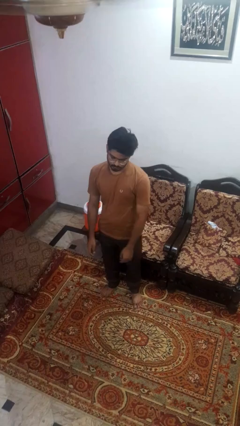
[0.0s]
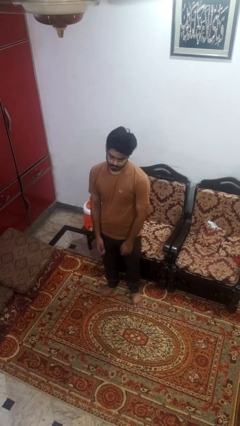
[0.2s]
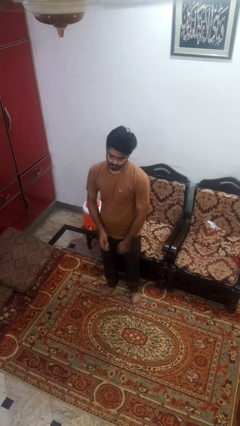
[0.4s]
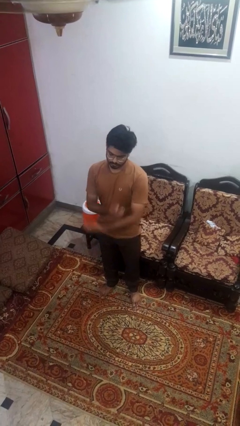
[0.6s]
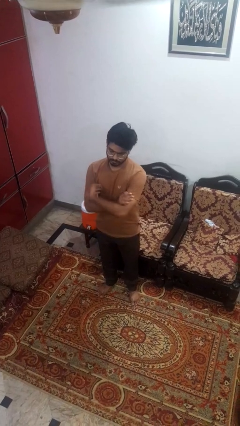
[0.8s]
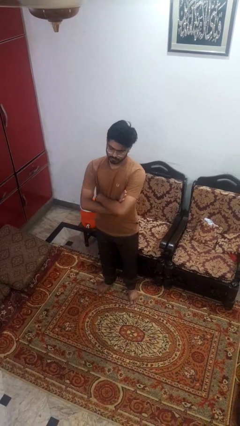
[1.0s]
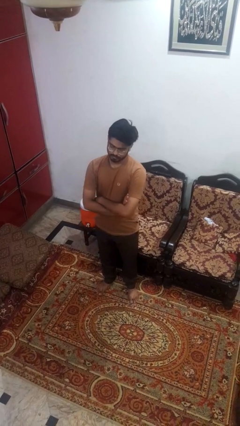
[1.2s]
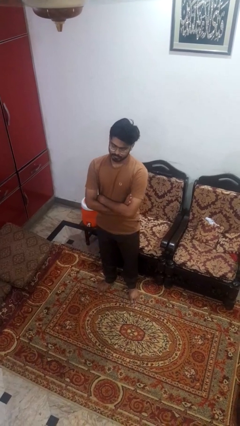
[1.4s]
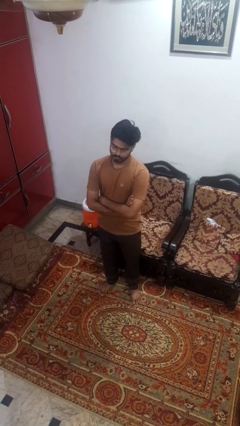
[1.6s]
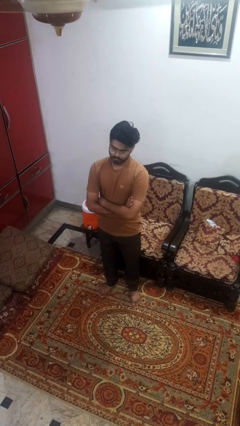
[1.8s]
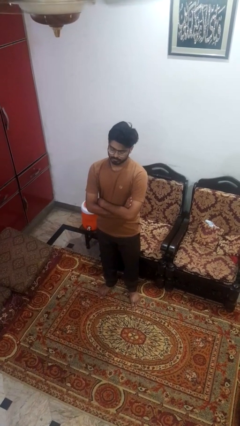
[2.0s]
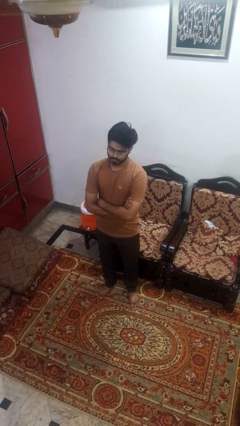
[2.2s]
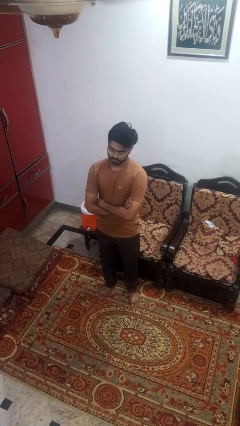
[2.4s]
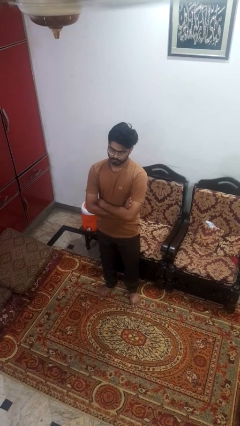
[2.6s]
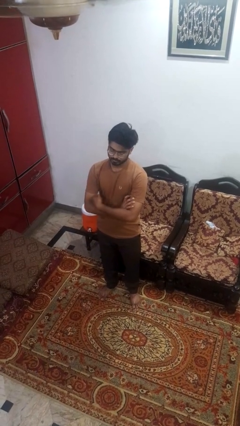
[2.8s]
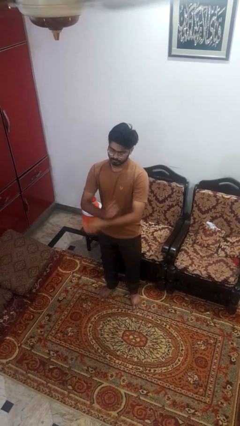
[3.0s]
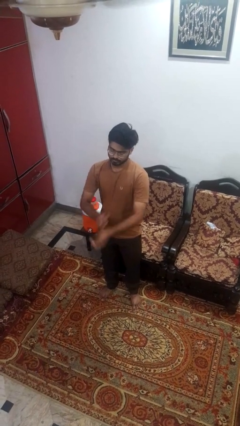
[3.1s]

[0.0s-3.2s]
person crosses arms

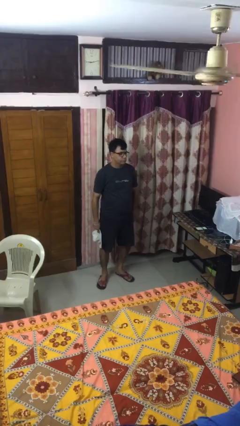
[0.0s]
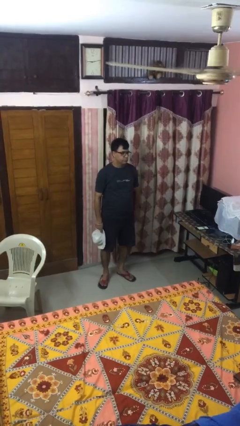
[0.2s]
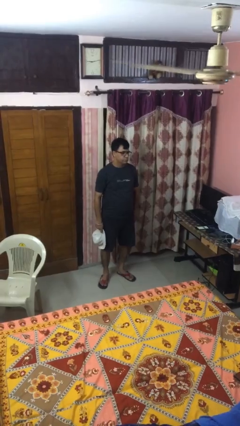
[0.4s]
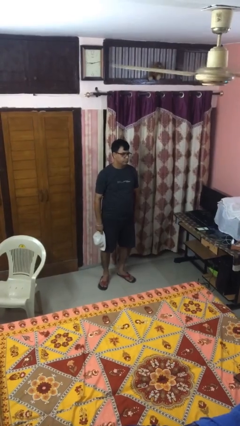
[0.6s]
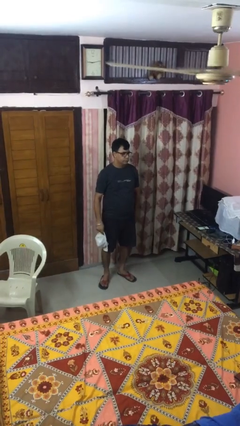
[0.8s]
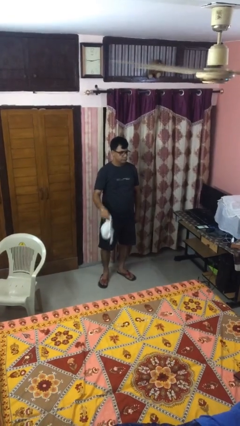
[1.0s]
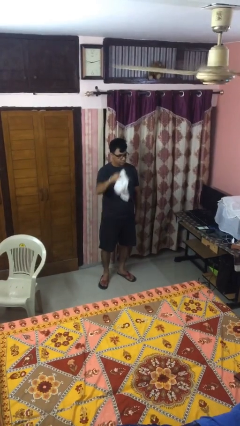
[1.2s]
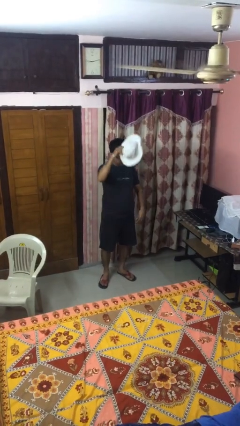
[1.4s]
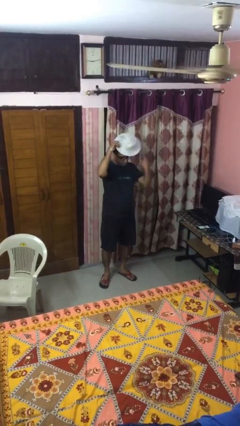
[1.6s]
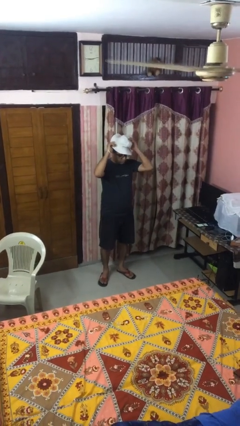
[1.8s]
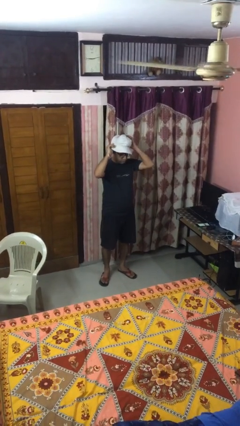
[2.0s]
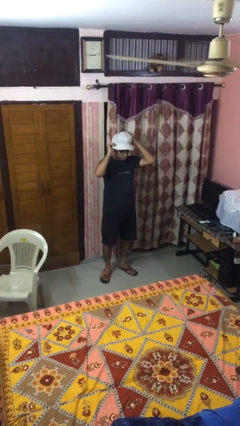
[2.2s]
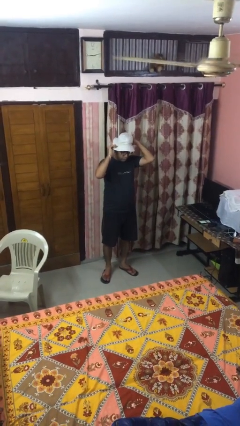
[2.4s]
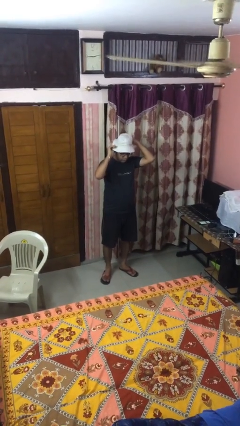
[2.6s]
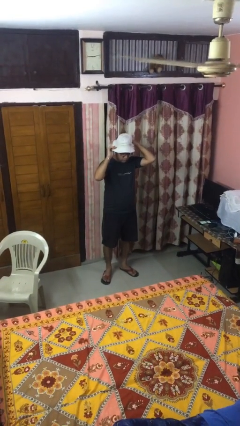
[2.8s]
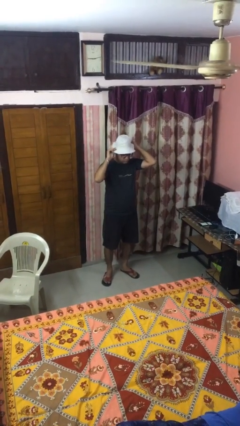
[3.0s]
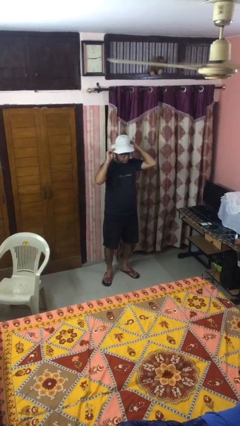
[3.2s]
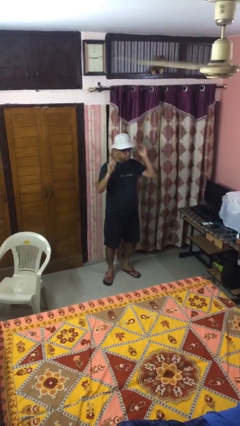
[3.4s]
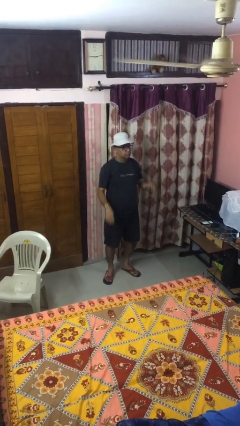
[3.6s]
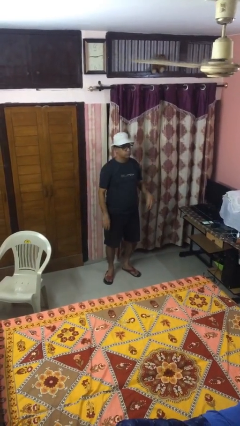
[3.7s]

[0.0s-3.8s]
person puts on hat

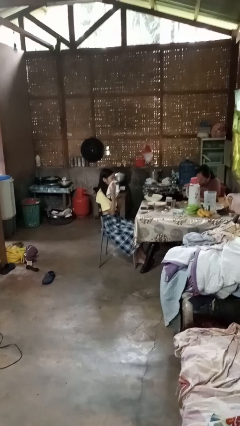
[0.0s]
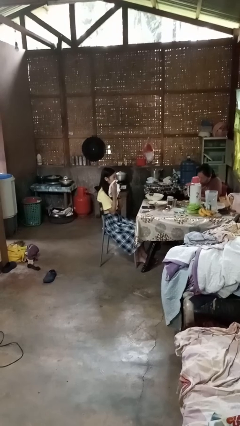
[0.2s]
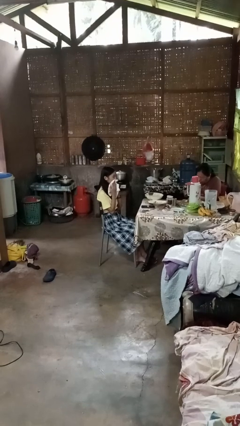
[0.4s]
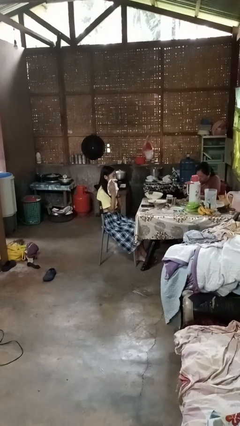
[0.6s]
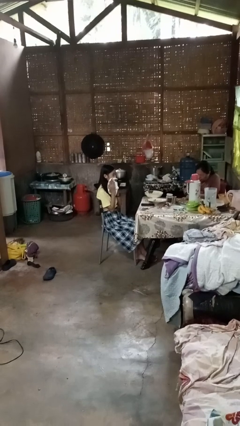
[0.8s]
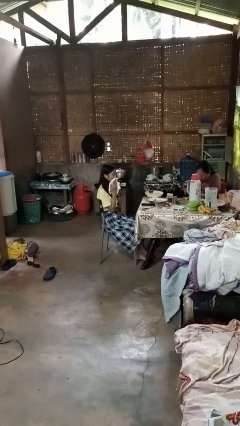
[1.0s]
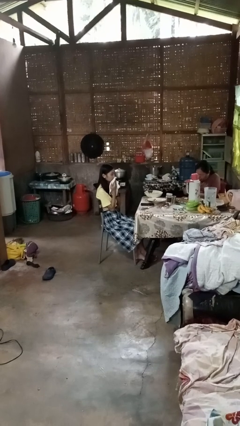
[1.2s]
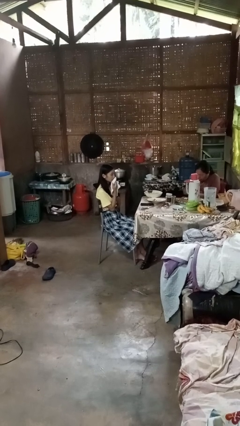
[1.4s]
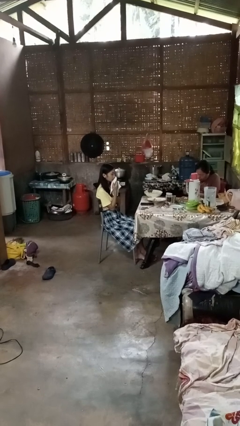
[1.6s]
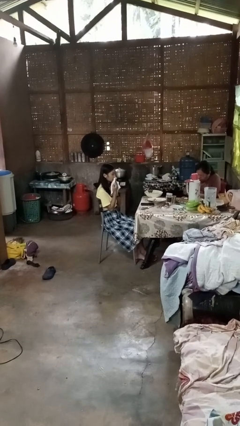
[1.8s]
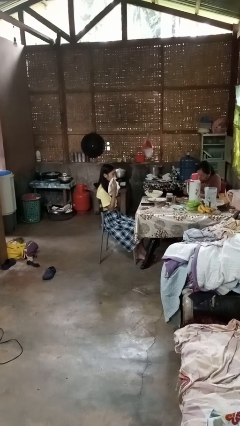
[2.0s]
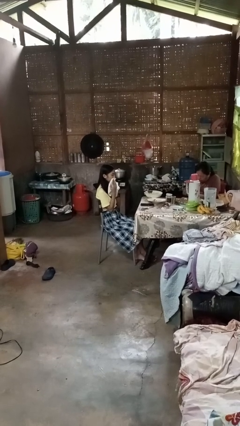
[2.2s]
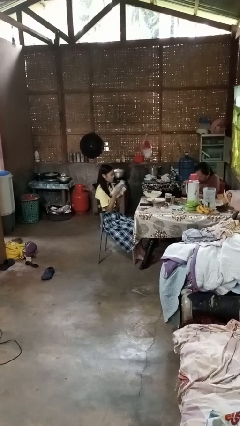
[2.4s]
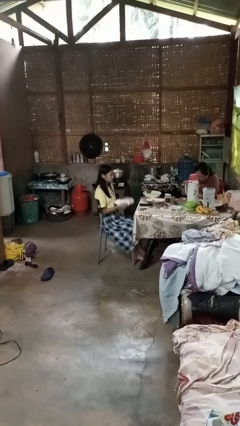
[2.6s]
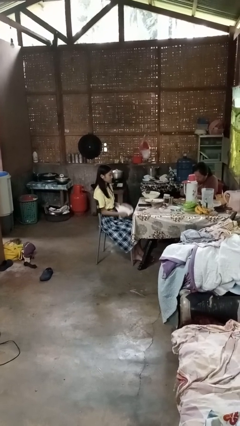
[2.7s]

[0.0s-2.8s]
person wipes mouth with napkin

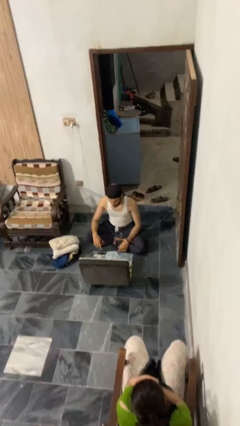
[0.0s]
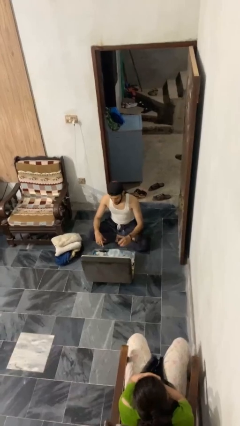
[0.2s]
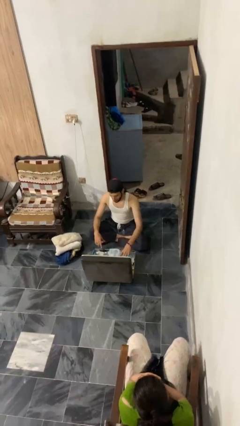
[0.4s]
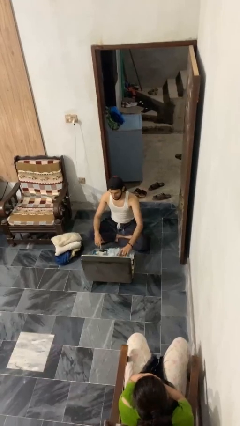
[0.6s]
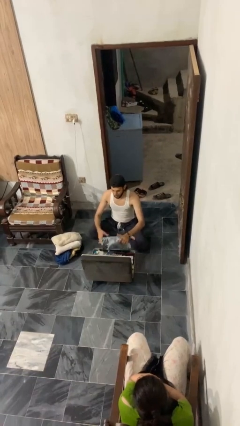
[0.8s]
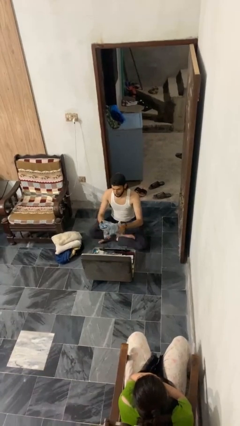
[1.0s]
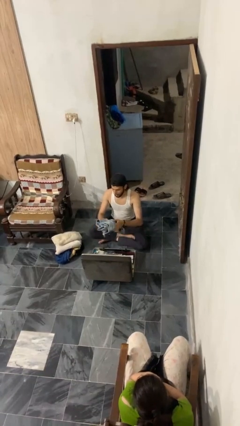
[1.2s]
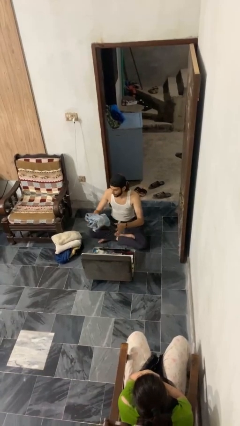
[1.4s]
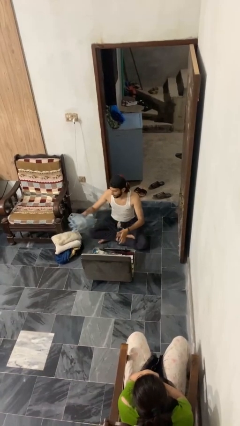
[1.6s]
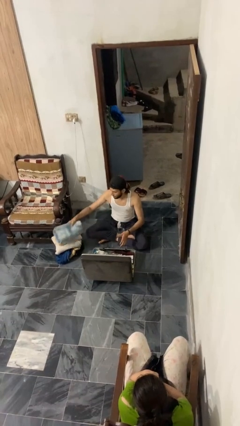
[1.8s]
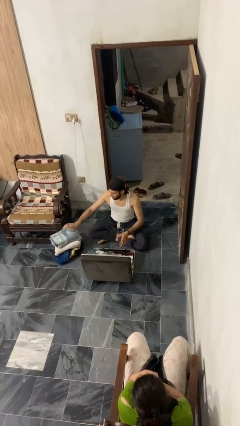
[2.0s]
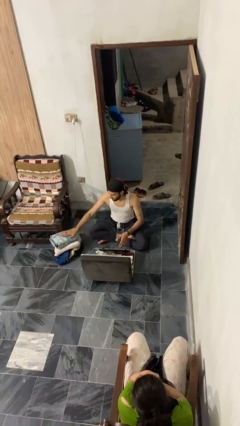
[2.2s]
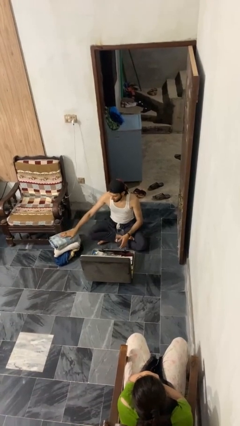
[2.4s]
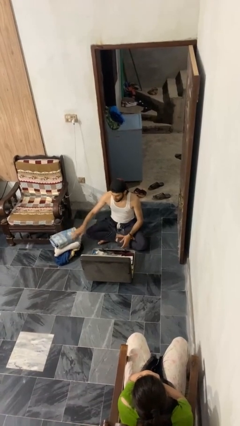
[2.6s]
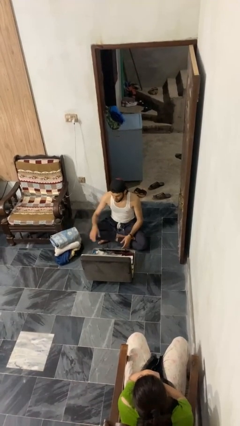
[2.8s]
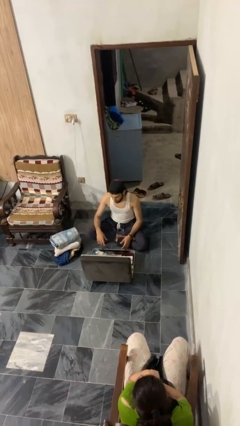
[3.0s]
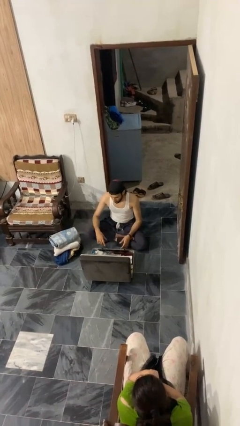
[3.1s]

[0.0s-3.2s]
person unloads clothes from suitcase

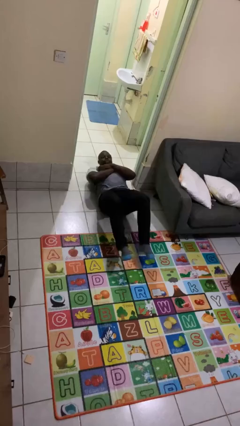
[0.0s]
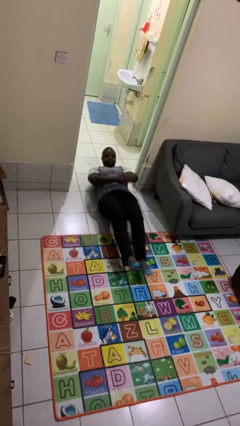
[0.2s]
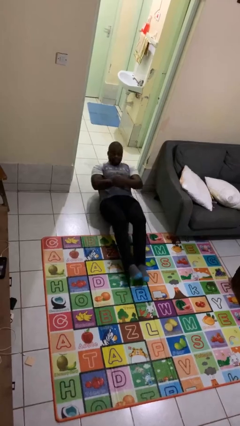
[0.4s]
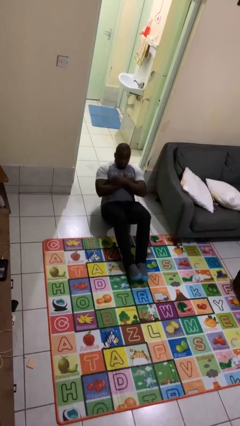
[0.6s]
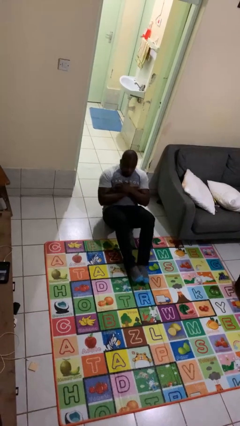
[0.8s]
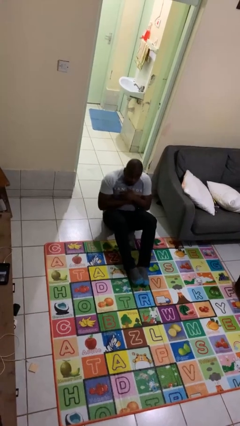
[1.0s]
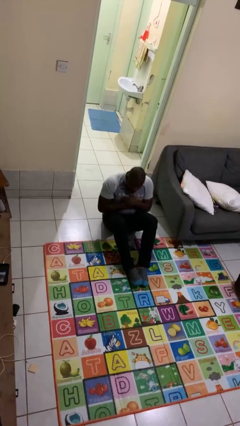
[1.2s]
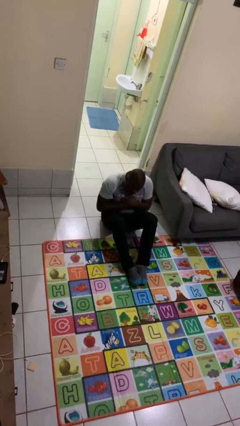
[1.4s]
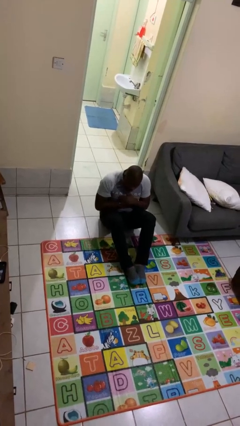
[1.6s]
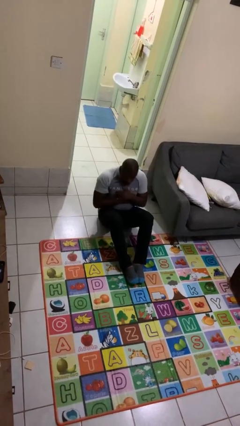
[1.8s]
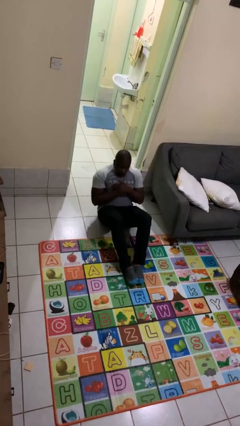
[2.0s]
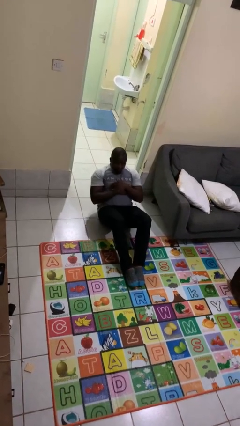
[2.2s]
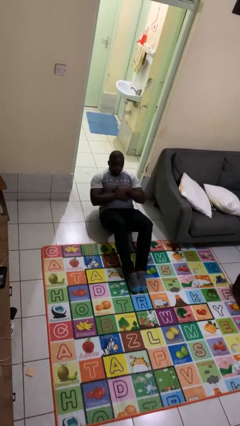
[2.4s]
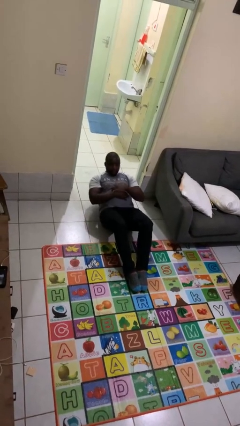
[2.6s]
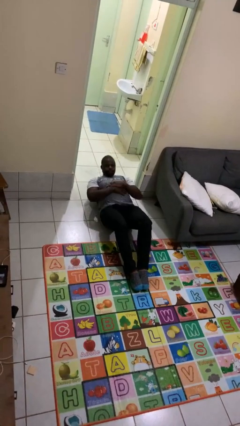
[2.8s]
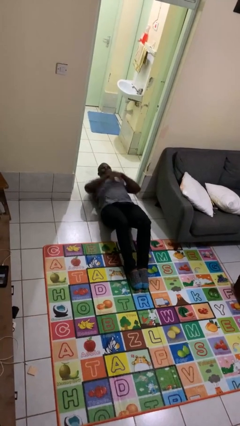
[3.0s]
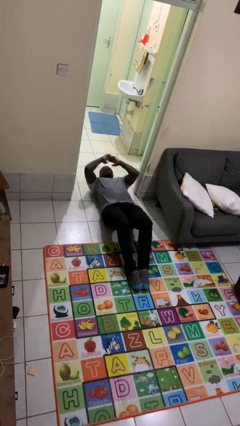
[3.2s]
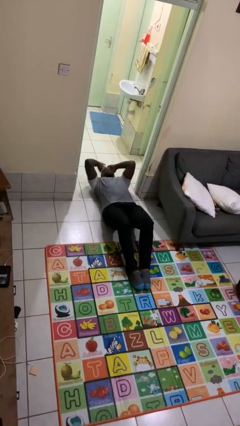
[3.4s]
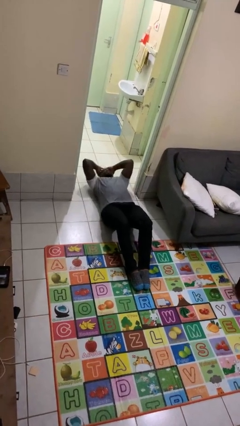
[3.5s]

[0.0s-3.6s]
person exercises with situp

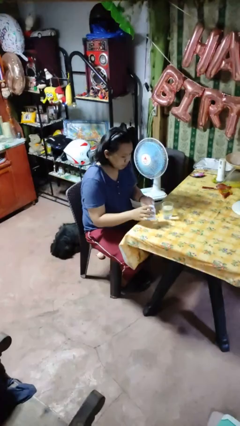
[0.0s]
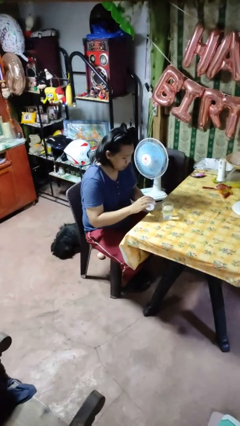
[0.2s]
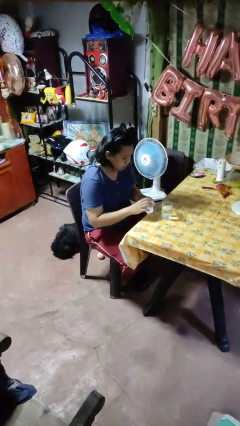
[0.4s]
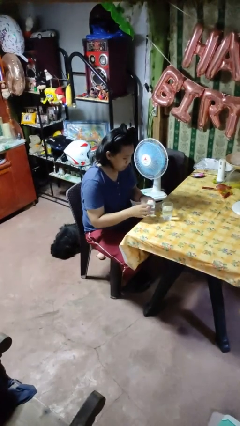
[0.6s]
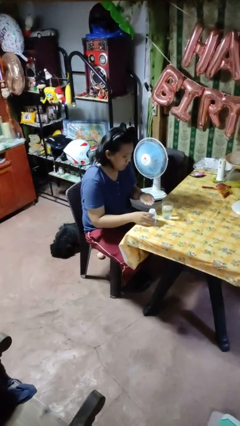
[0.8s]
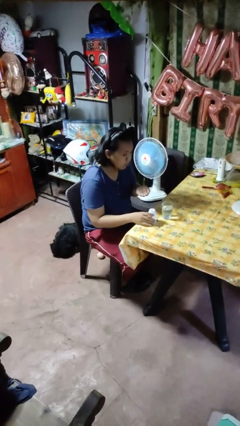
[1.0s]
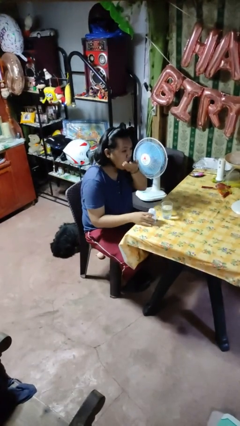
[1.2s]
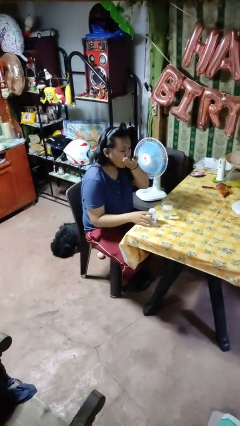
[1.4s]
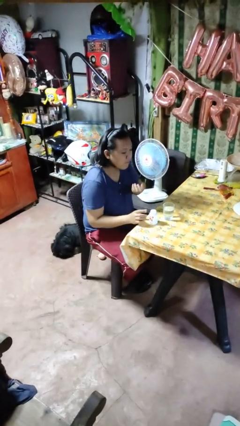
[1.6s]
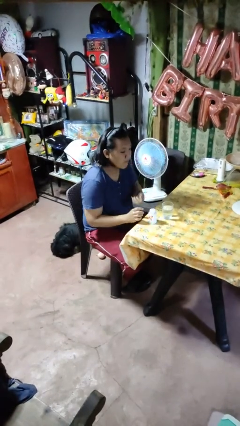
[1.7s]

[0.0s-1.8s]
person takes medicine pills
